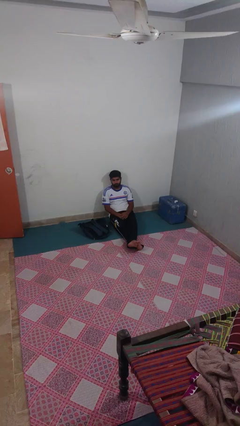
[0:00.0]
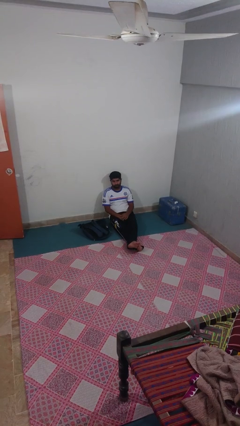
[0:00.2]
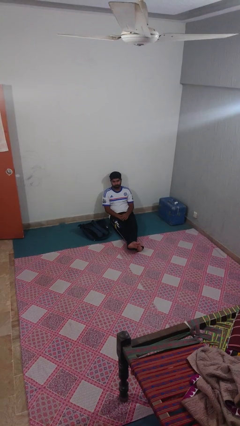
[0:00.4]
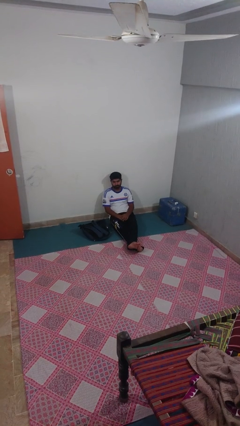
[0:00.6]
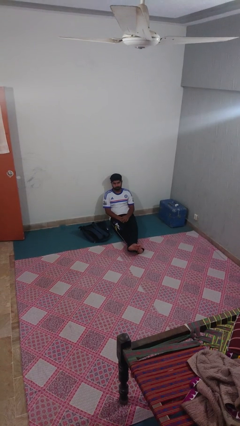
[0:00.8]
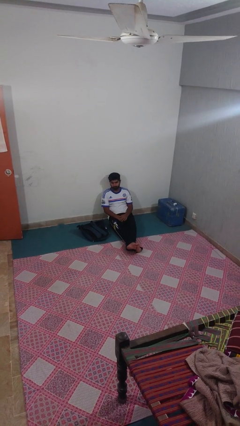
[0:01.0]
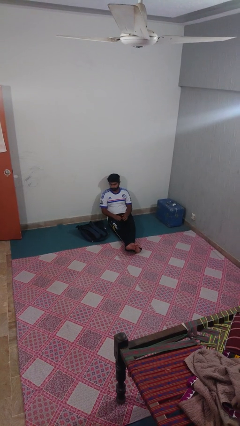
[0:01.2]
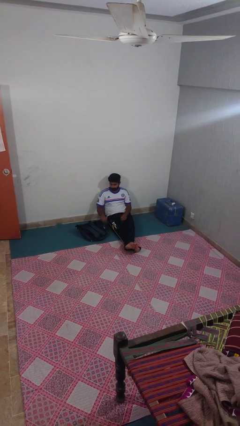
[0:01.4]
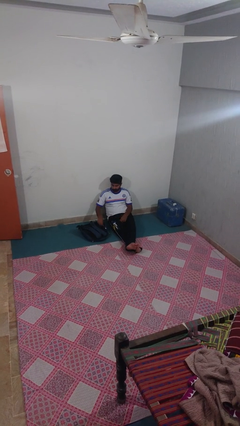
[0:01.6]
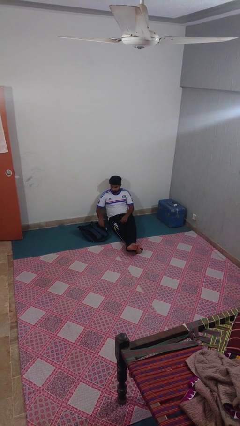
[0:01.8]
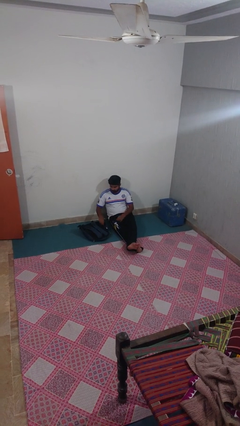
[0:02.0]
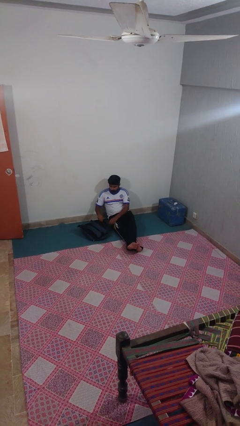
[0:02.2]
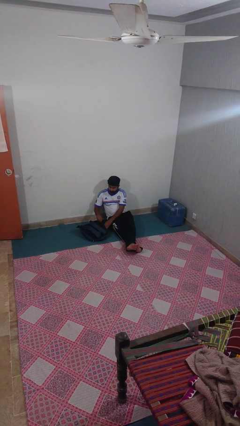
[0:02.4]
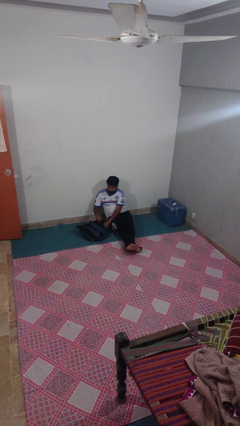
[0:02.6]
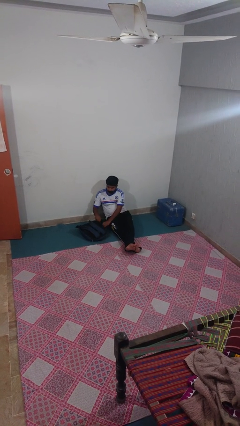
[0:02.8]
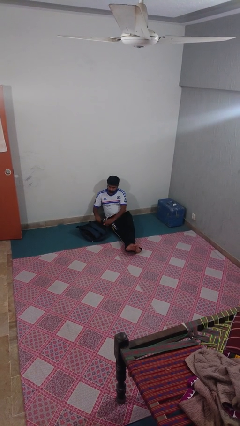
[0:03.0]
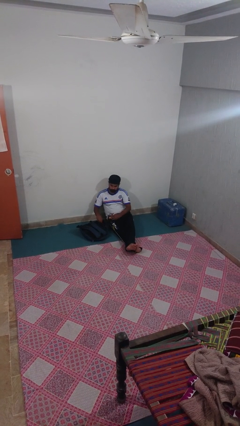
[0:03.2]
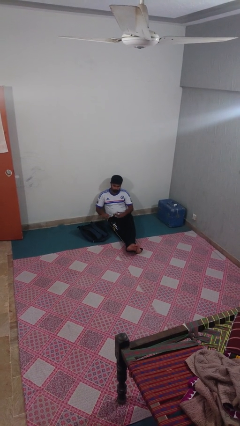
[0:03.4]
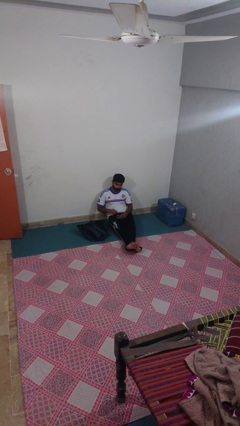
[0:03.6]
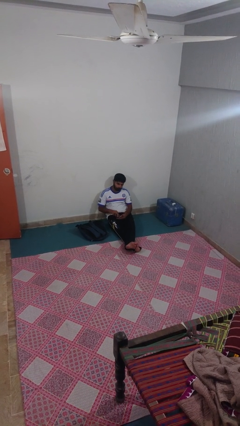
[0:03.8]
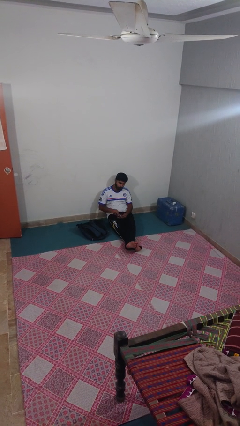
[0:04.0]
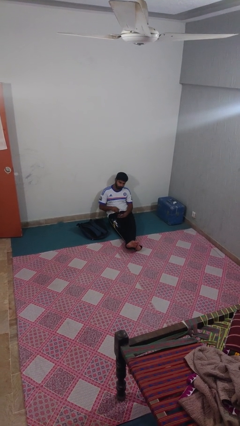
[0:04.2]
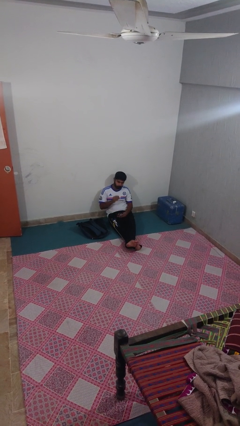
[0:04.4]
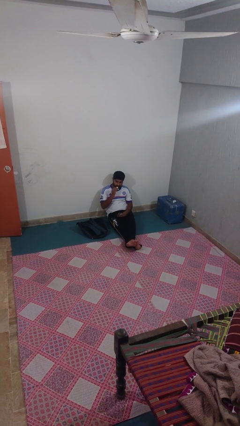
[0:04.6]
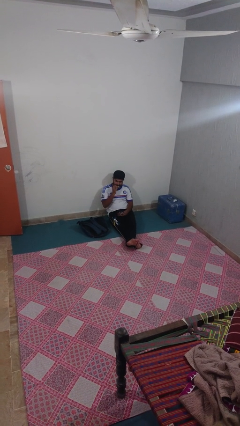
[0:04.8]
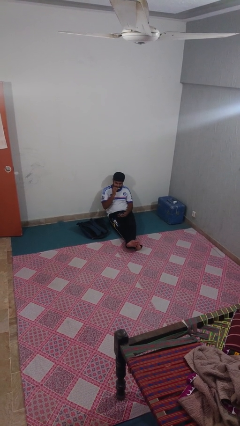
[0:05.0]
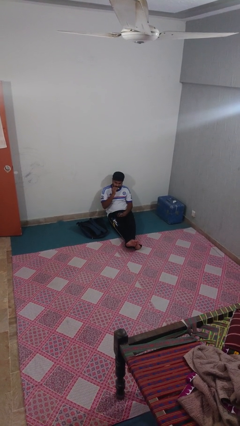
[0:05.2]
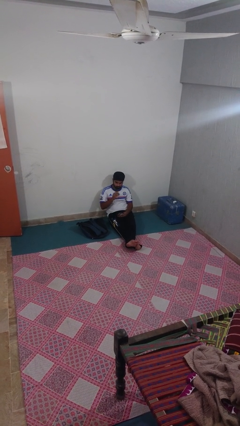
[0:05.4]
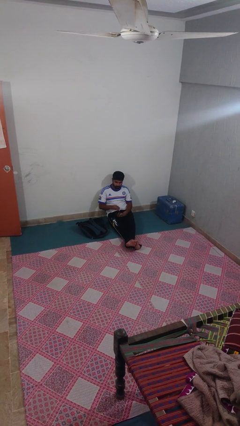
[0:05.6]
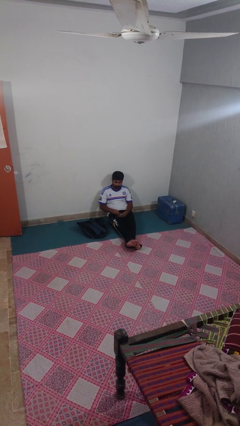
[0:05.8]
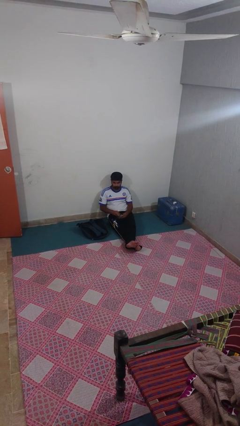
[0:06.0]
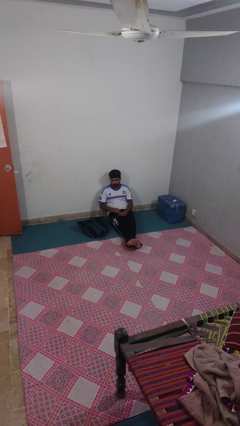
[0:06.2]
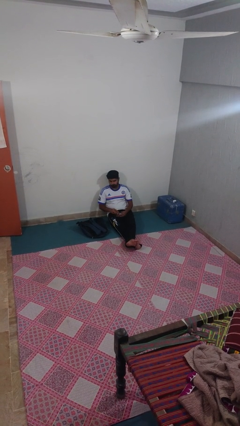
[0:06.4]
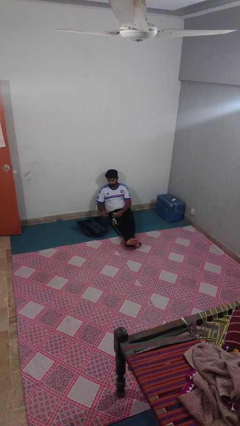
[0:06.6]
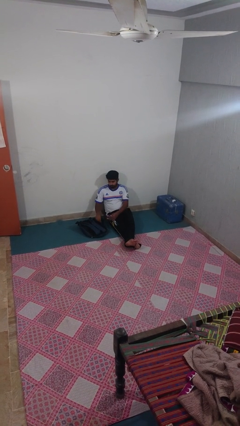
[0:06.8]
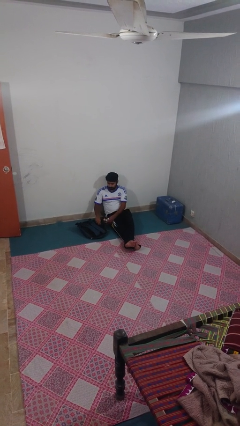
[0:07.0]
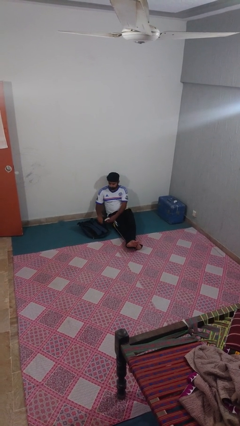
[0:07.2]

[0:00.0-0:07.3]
person eats snack from bag

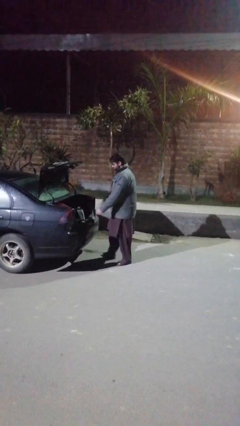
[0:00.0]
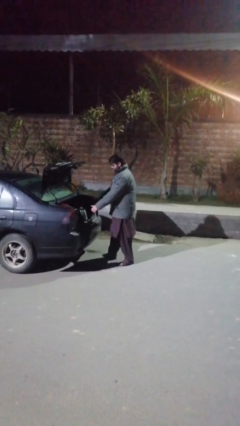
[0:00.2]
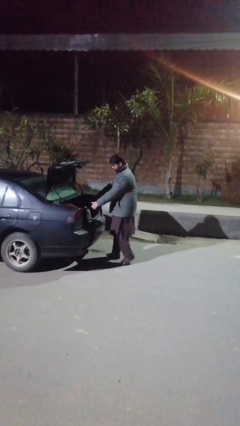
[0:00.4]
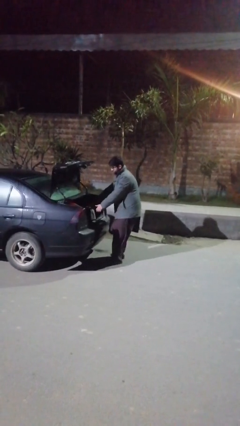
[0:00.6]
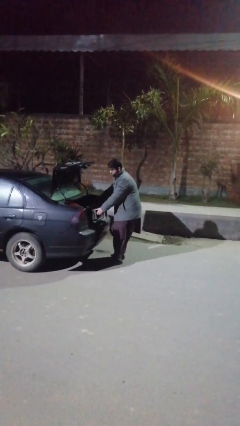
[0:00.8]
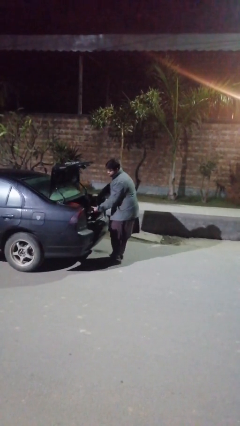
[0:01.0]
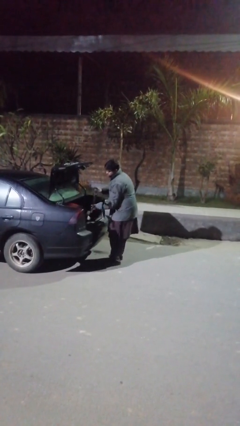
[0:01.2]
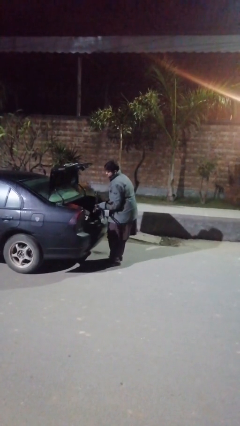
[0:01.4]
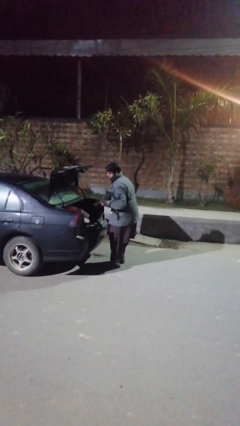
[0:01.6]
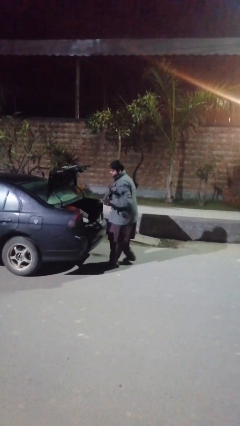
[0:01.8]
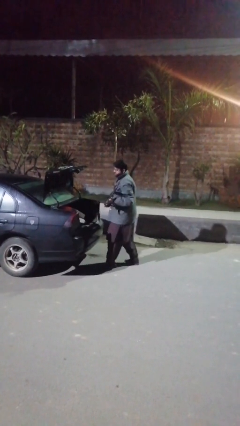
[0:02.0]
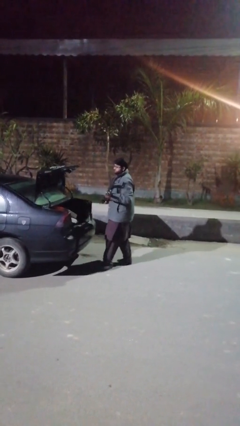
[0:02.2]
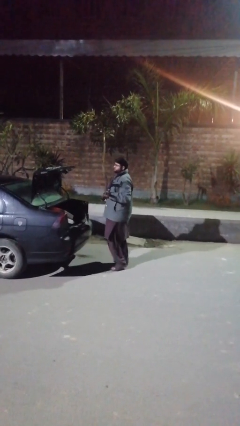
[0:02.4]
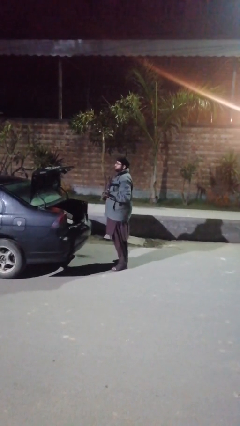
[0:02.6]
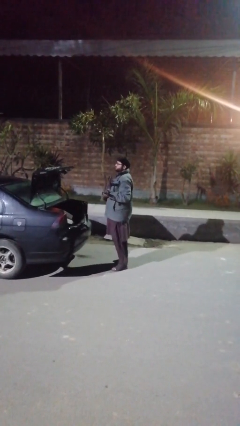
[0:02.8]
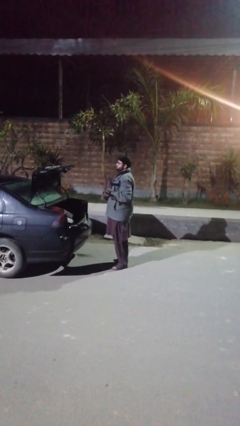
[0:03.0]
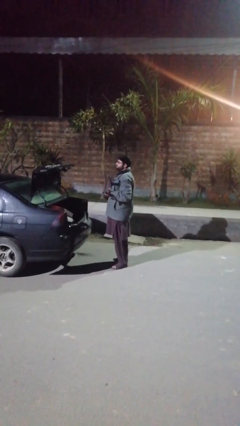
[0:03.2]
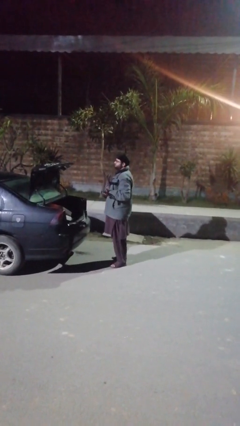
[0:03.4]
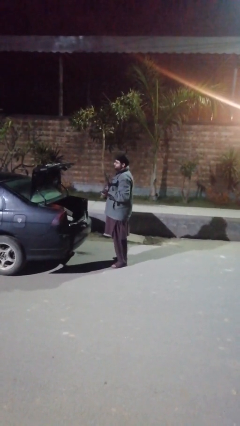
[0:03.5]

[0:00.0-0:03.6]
person unloads car

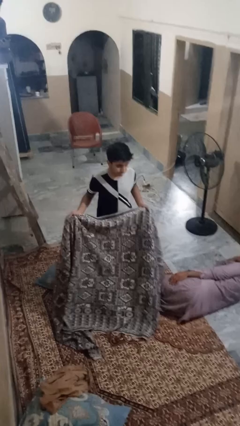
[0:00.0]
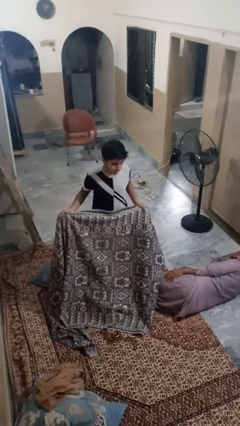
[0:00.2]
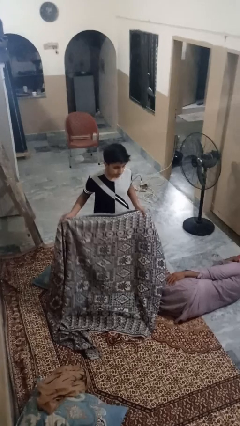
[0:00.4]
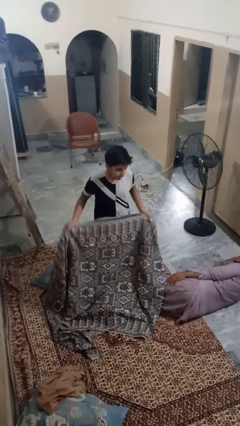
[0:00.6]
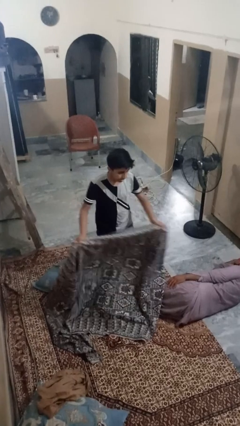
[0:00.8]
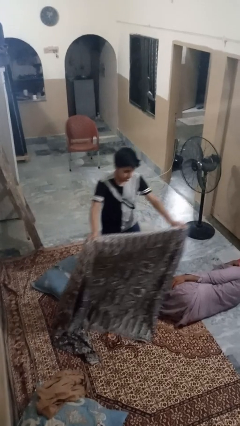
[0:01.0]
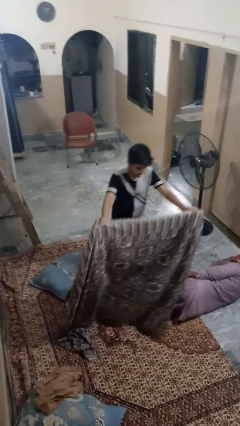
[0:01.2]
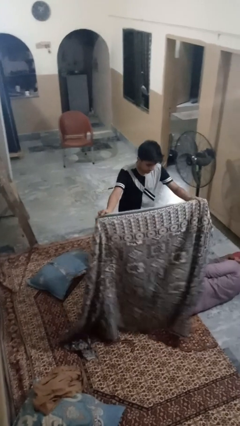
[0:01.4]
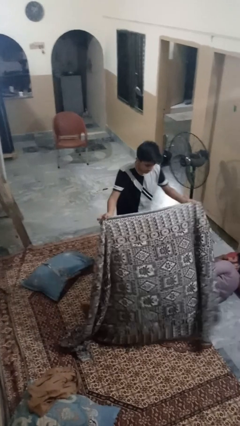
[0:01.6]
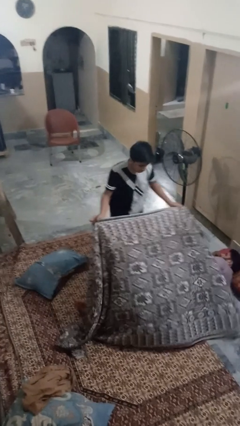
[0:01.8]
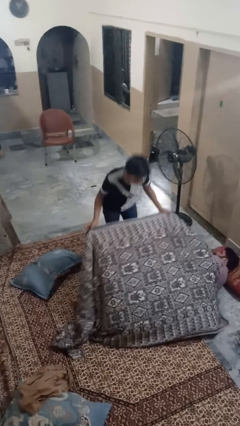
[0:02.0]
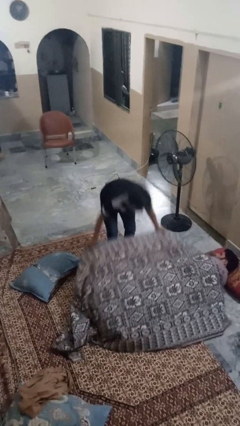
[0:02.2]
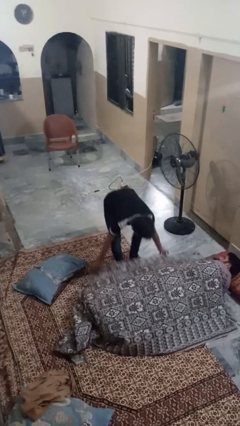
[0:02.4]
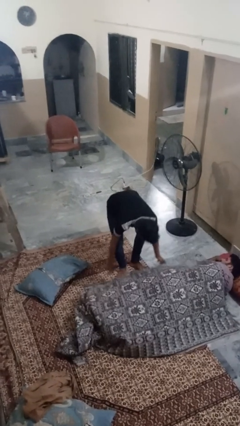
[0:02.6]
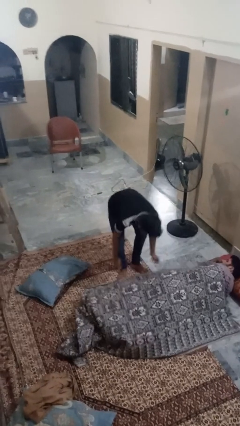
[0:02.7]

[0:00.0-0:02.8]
person covers friend with blanket

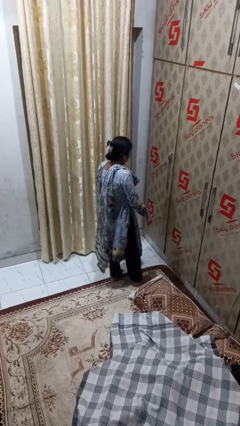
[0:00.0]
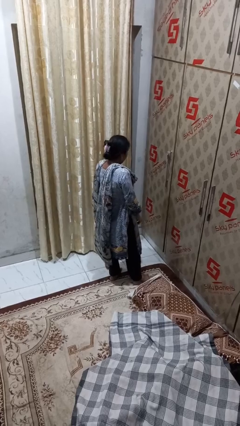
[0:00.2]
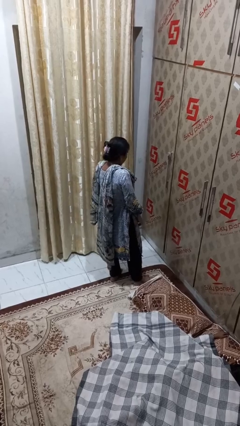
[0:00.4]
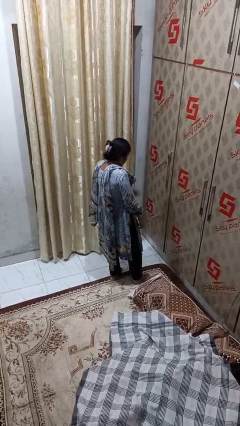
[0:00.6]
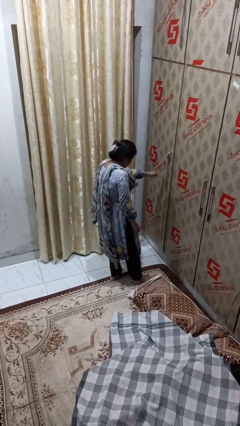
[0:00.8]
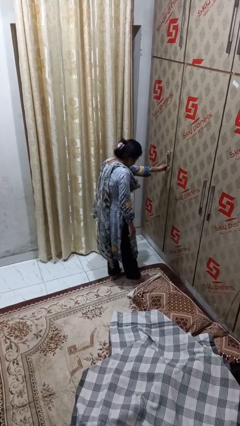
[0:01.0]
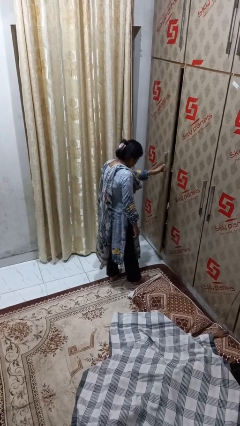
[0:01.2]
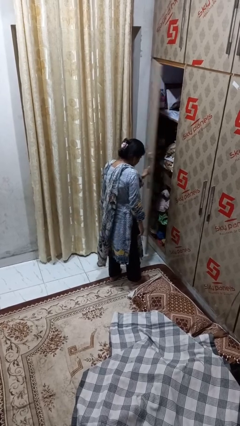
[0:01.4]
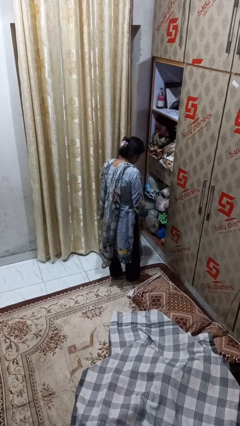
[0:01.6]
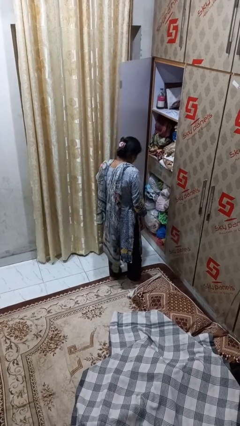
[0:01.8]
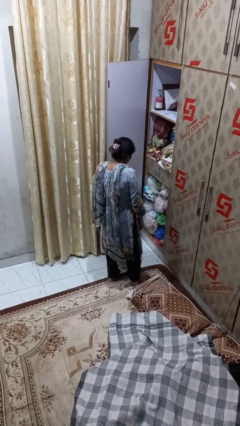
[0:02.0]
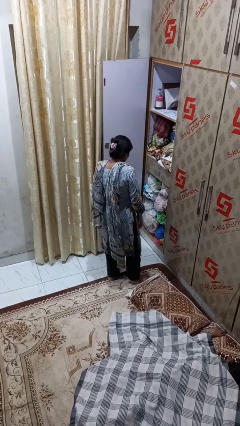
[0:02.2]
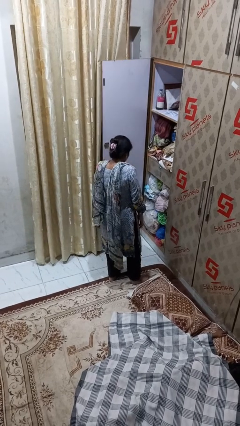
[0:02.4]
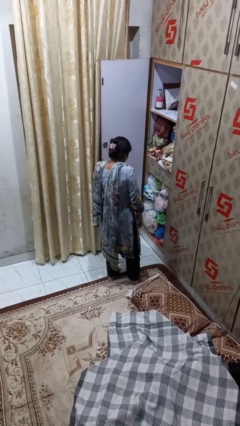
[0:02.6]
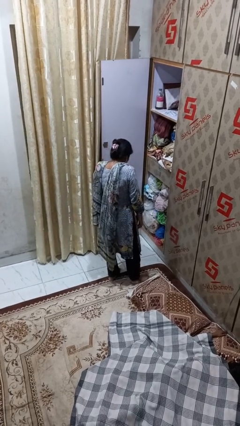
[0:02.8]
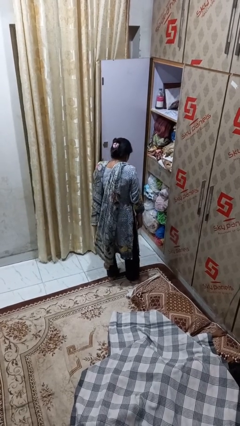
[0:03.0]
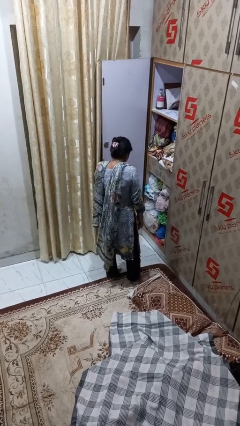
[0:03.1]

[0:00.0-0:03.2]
person opens closet door

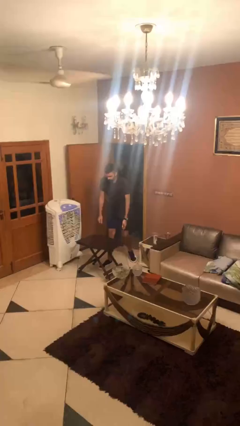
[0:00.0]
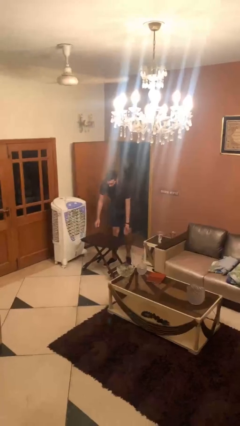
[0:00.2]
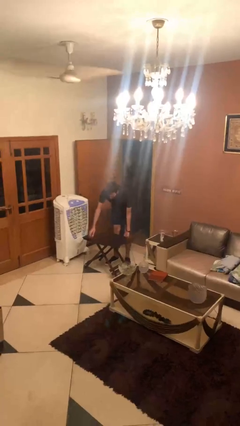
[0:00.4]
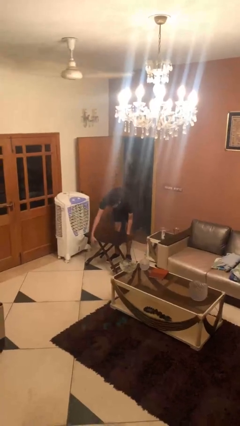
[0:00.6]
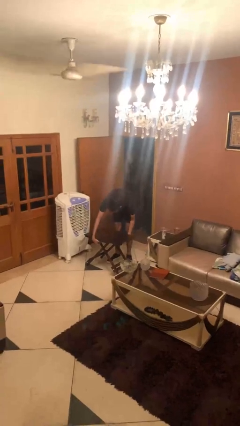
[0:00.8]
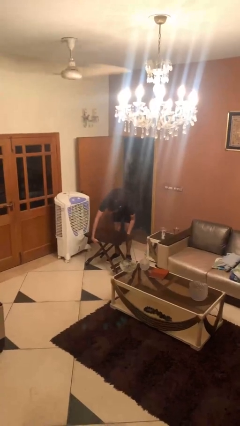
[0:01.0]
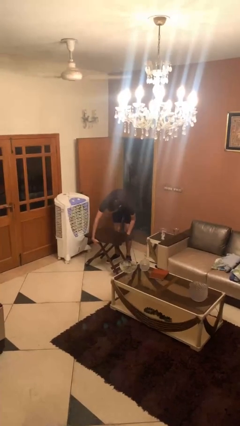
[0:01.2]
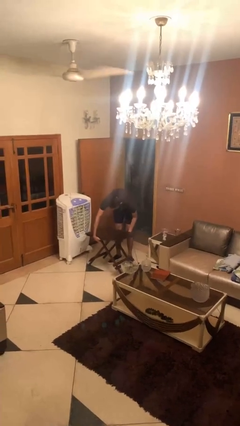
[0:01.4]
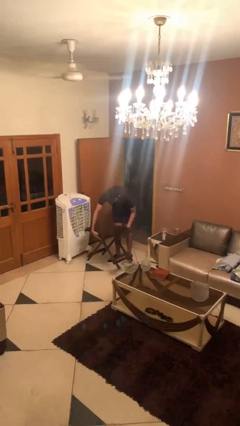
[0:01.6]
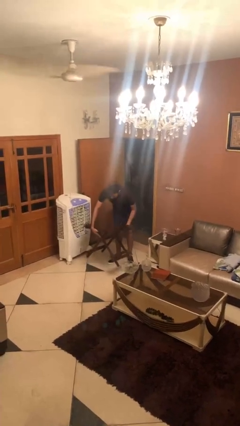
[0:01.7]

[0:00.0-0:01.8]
person picks up object from floor
